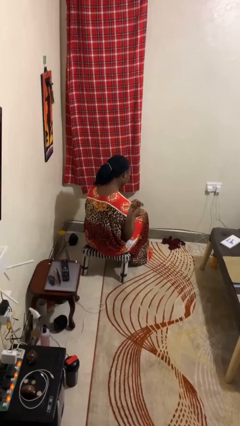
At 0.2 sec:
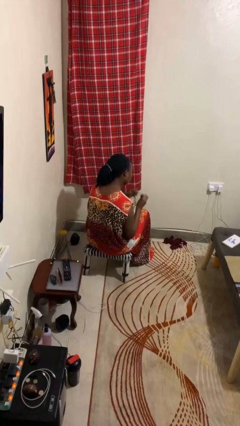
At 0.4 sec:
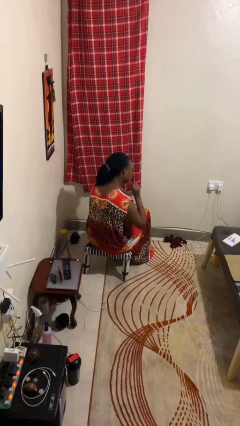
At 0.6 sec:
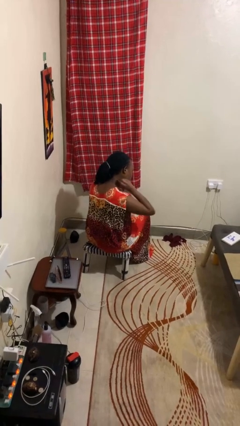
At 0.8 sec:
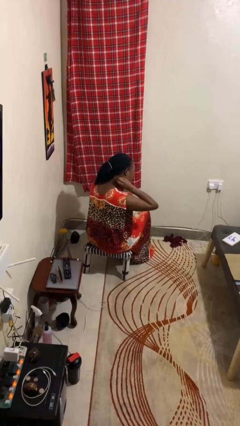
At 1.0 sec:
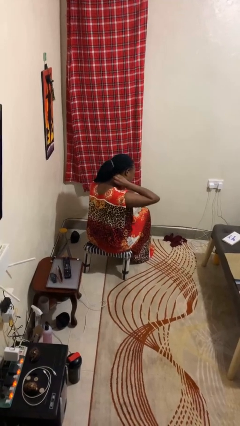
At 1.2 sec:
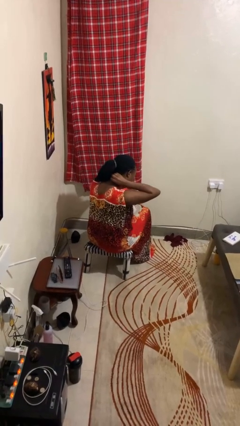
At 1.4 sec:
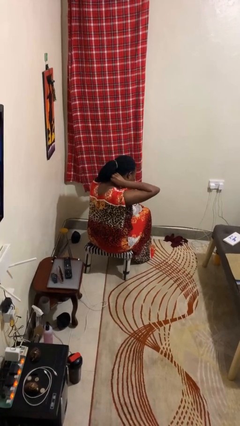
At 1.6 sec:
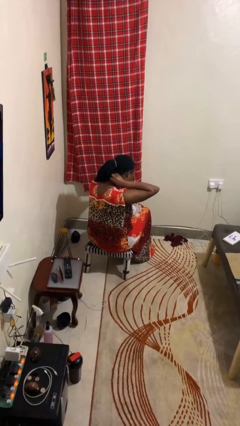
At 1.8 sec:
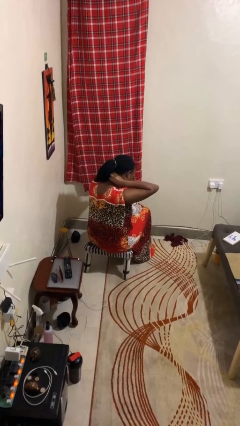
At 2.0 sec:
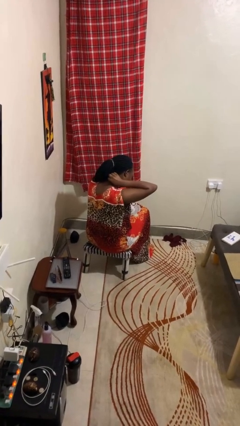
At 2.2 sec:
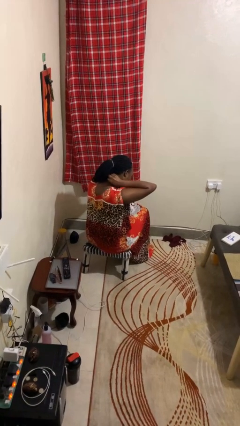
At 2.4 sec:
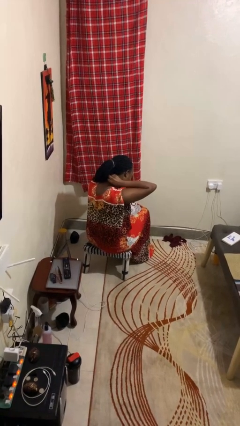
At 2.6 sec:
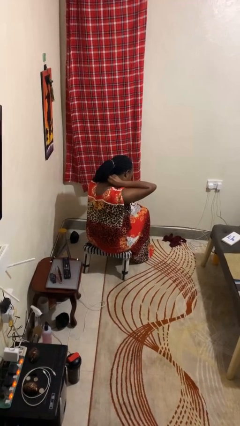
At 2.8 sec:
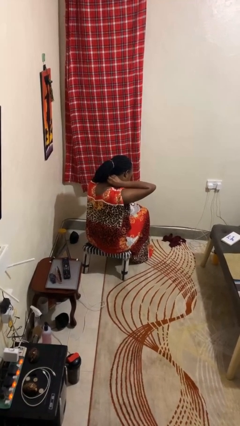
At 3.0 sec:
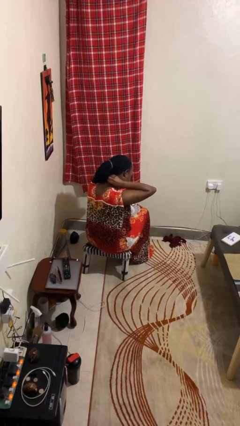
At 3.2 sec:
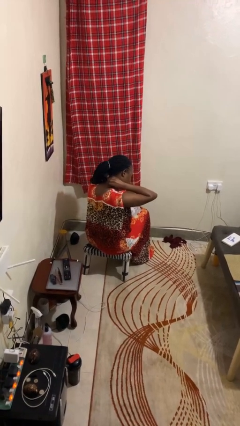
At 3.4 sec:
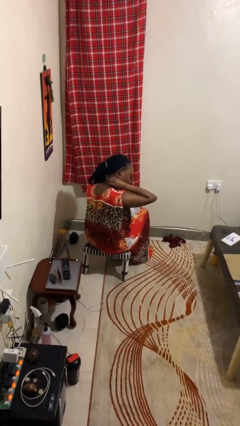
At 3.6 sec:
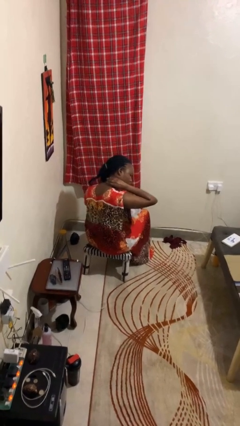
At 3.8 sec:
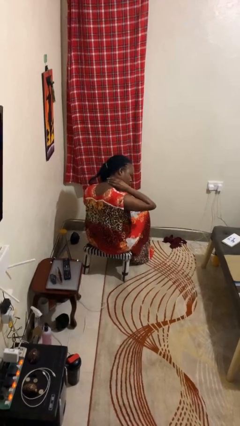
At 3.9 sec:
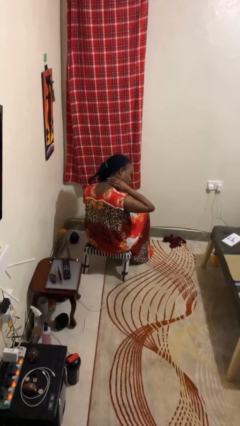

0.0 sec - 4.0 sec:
person puts on necklace

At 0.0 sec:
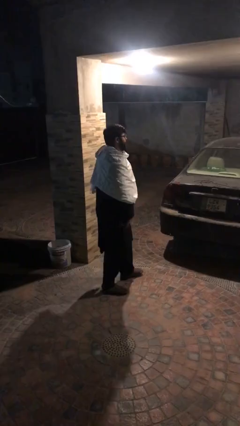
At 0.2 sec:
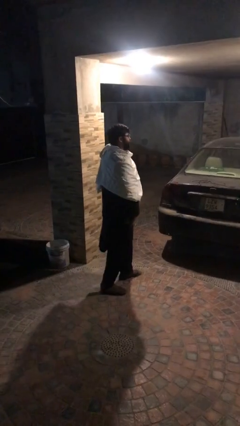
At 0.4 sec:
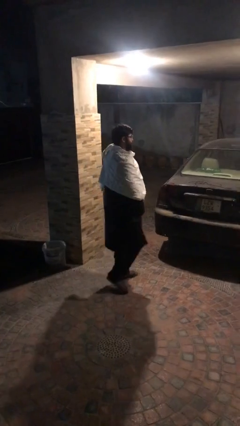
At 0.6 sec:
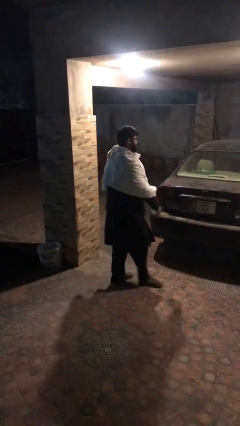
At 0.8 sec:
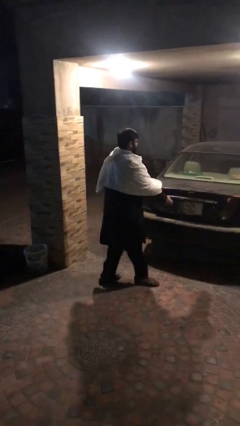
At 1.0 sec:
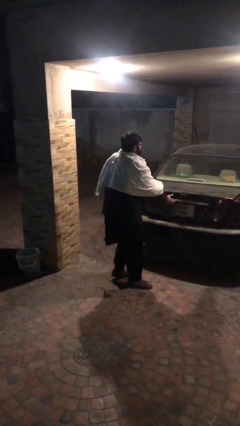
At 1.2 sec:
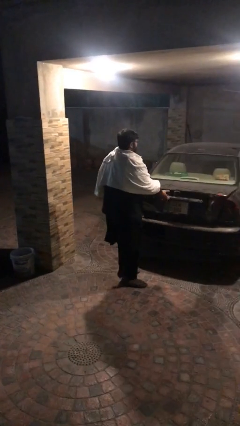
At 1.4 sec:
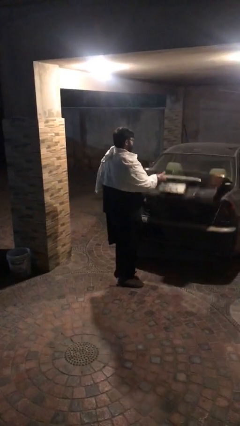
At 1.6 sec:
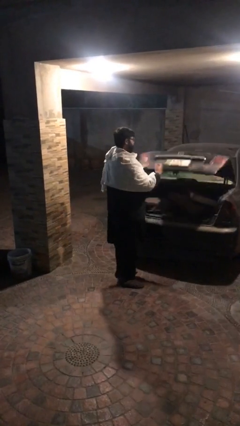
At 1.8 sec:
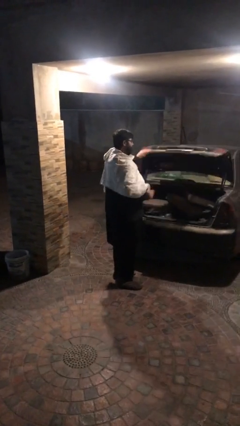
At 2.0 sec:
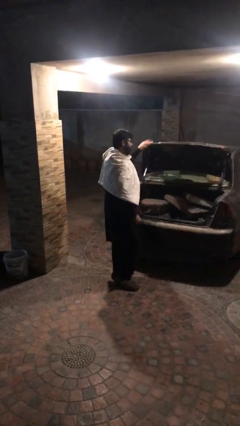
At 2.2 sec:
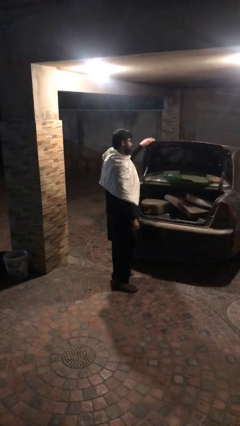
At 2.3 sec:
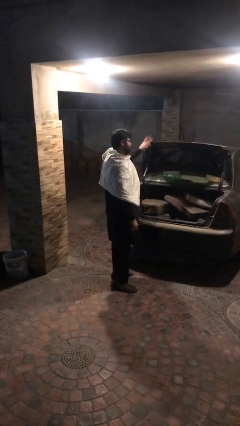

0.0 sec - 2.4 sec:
person opens car trunk

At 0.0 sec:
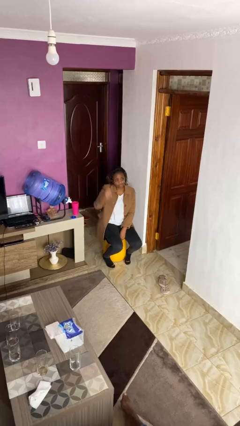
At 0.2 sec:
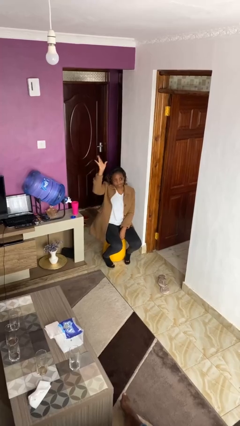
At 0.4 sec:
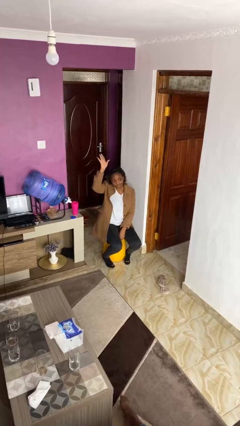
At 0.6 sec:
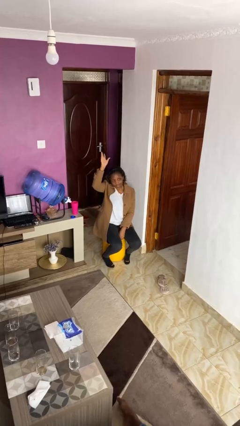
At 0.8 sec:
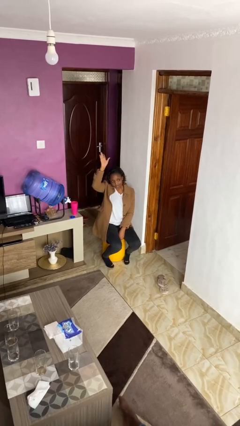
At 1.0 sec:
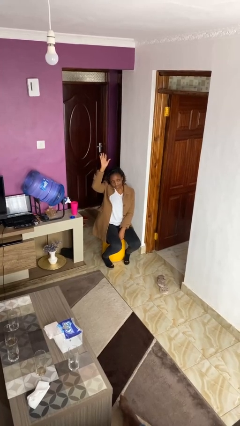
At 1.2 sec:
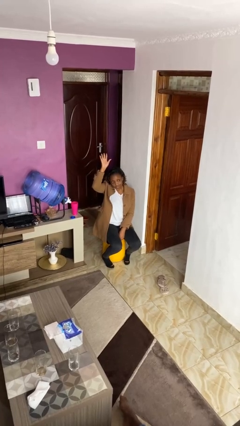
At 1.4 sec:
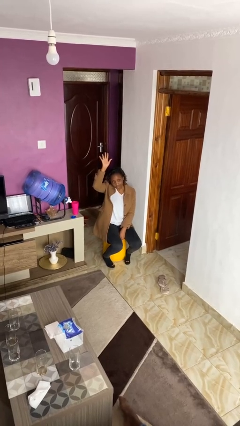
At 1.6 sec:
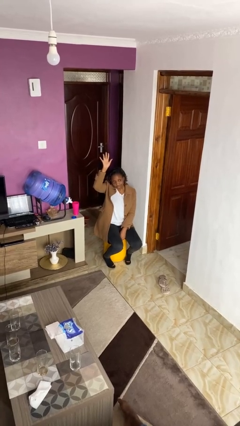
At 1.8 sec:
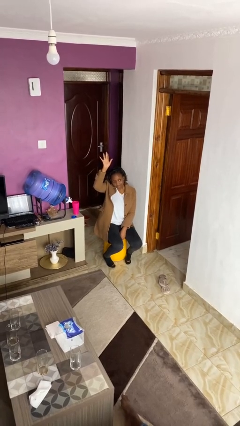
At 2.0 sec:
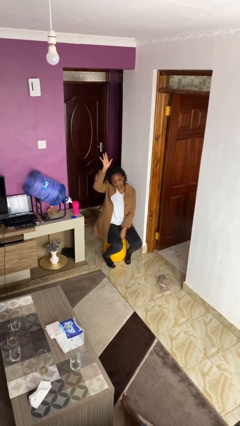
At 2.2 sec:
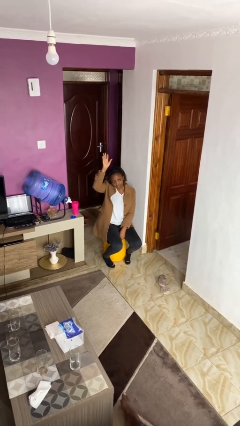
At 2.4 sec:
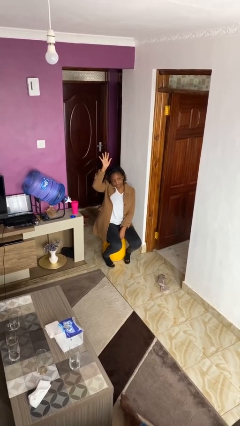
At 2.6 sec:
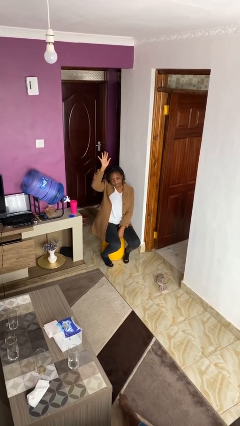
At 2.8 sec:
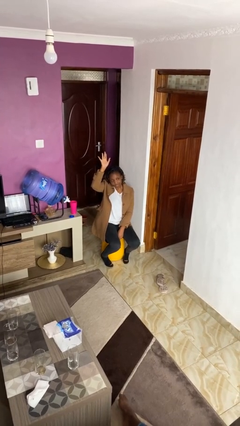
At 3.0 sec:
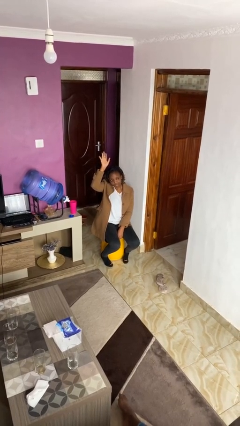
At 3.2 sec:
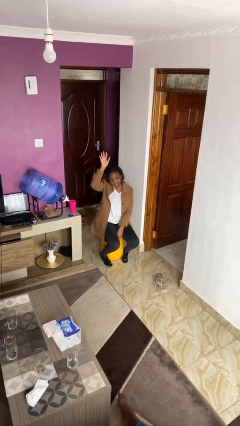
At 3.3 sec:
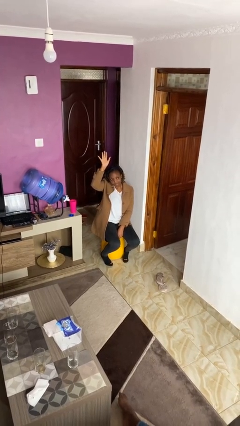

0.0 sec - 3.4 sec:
person gestures raise hand

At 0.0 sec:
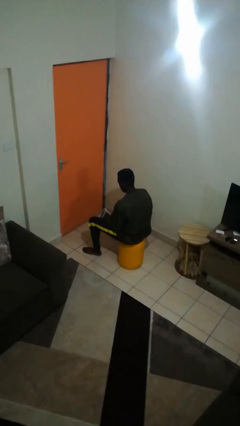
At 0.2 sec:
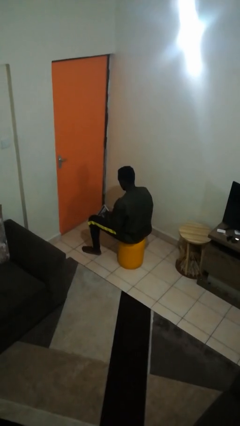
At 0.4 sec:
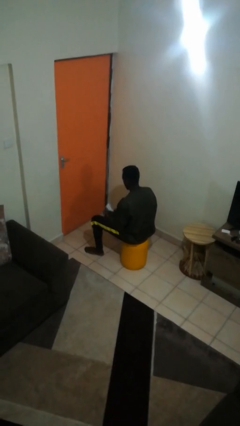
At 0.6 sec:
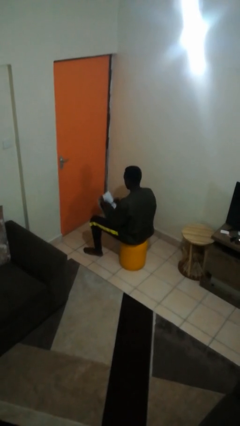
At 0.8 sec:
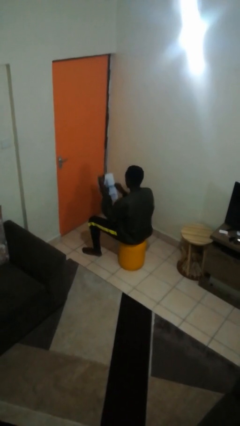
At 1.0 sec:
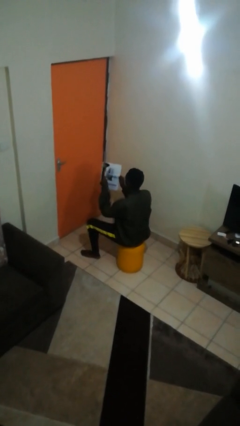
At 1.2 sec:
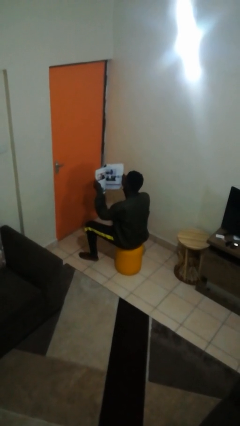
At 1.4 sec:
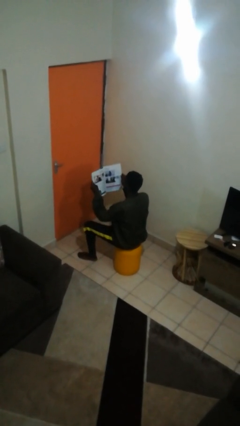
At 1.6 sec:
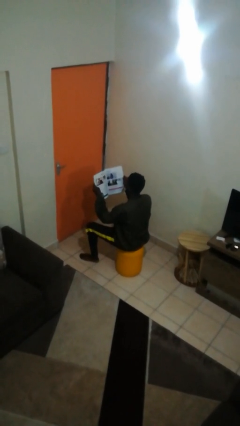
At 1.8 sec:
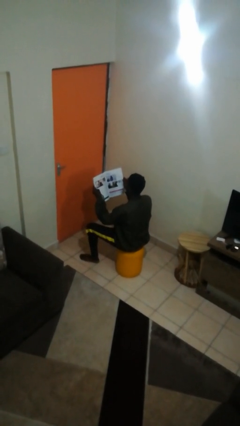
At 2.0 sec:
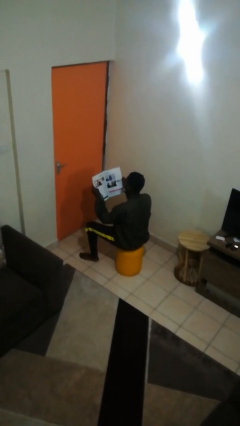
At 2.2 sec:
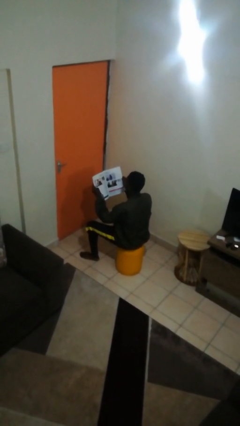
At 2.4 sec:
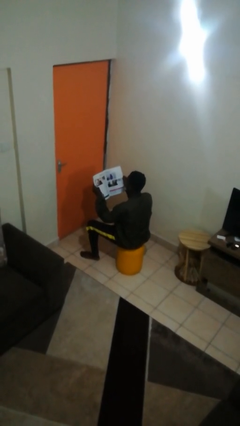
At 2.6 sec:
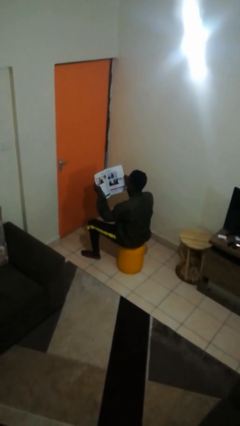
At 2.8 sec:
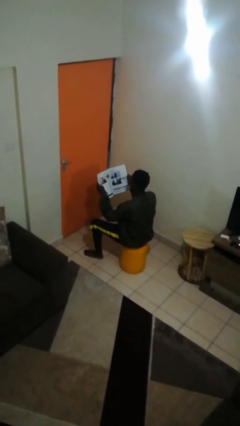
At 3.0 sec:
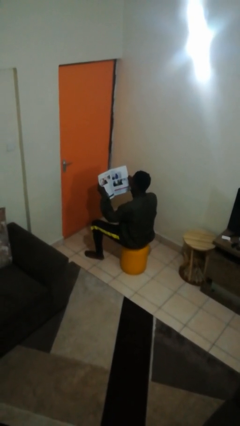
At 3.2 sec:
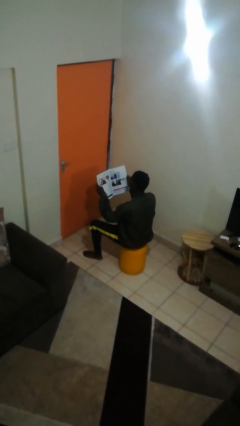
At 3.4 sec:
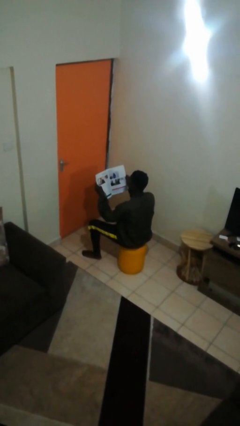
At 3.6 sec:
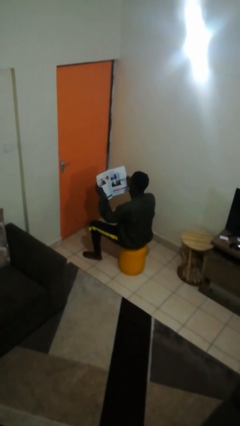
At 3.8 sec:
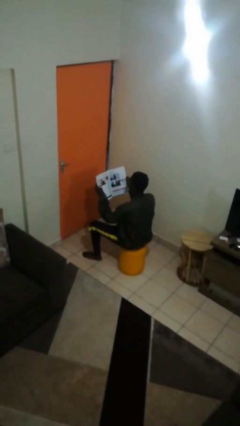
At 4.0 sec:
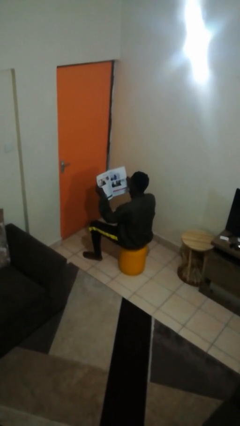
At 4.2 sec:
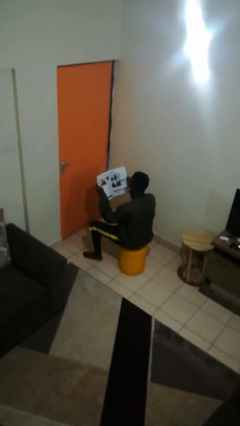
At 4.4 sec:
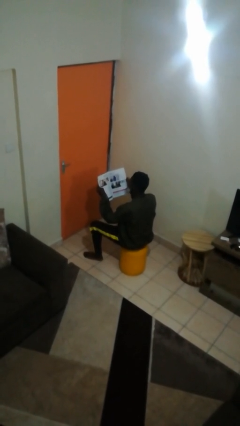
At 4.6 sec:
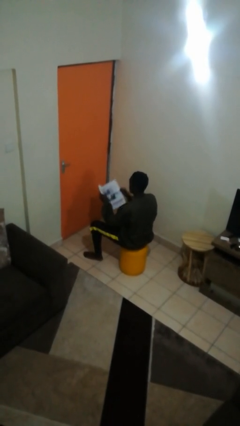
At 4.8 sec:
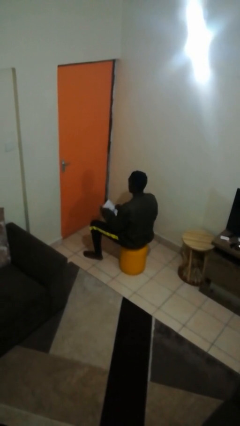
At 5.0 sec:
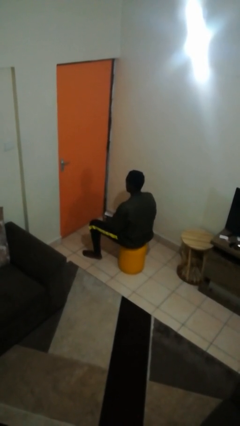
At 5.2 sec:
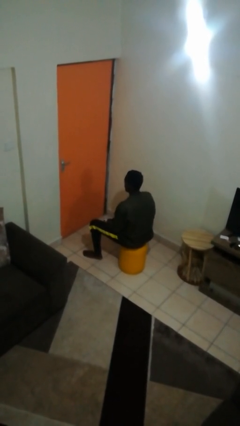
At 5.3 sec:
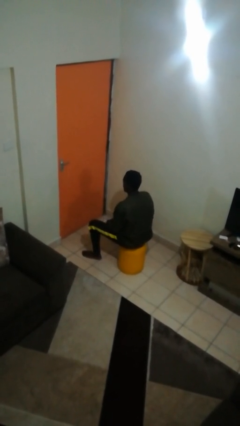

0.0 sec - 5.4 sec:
person reads magazine

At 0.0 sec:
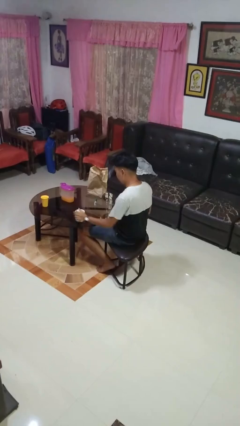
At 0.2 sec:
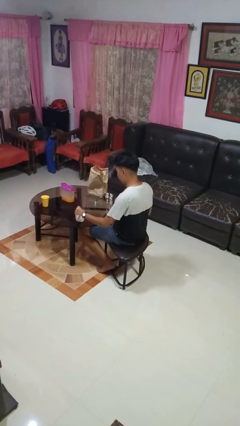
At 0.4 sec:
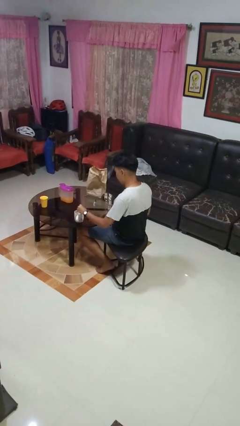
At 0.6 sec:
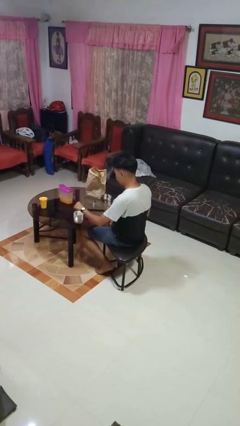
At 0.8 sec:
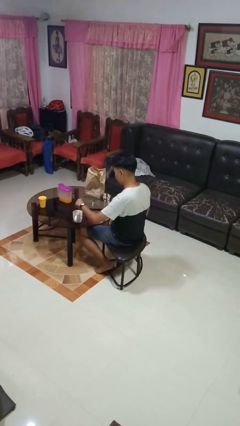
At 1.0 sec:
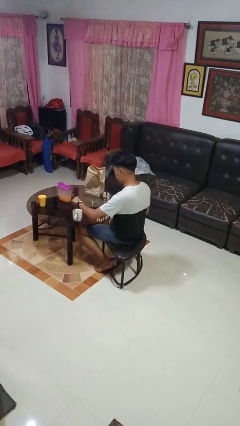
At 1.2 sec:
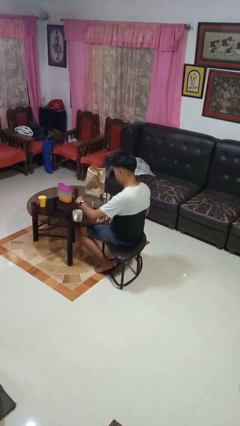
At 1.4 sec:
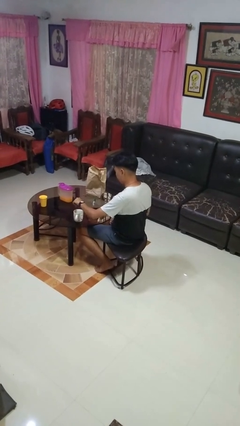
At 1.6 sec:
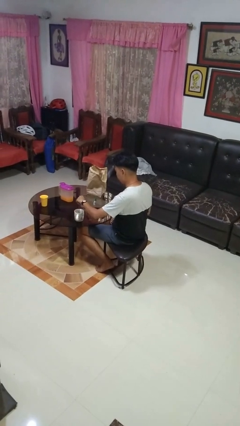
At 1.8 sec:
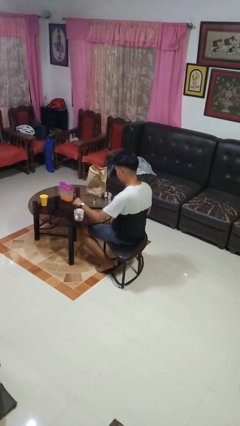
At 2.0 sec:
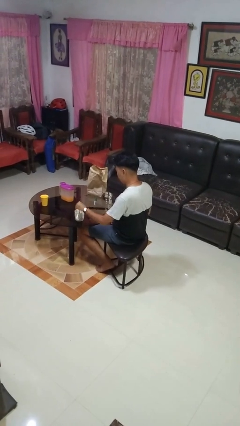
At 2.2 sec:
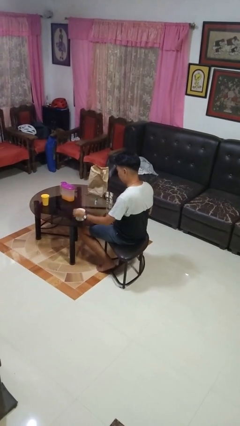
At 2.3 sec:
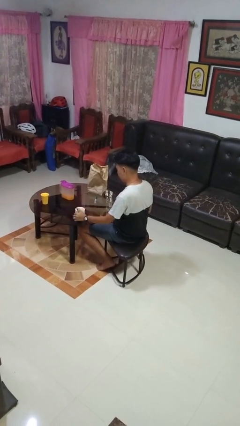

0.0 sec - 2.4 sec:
person stirs mug
